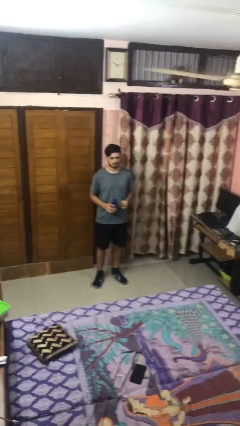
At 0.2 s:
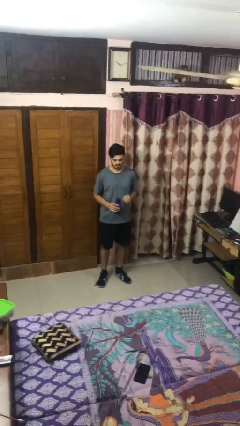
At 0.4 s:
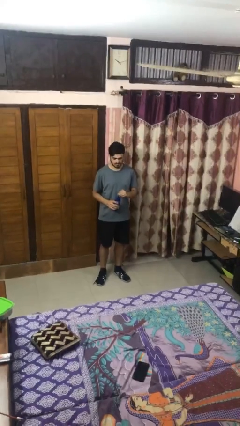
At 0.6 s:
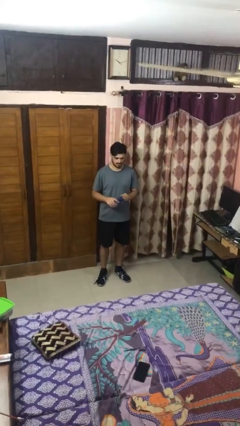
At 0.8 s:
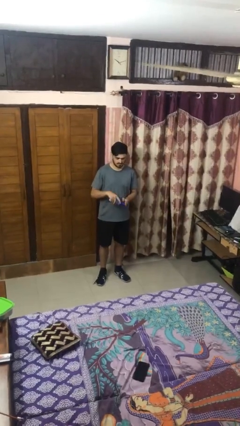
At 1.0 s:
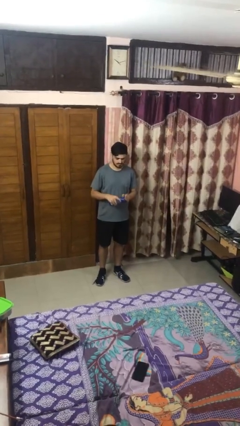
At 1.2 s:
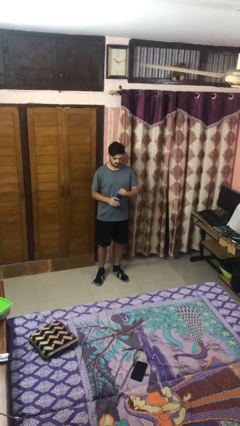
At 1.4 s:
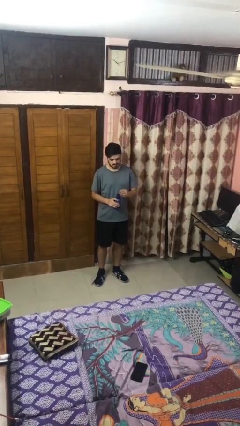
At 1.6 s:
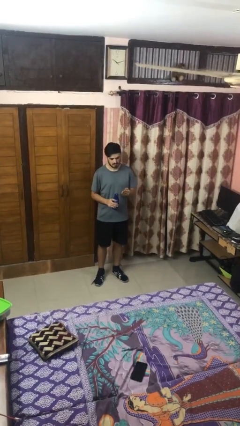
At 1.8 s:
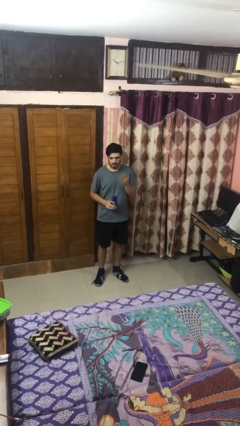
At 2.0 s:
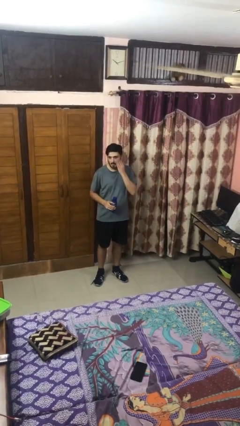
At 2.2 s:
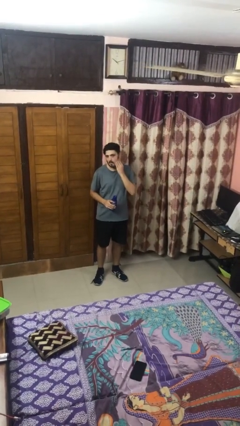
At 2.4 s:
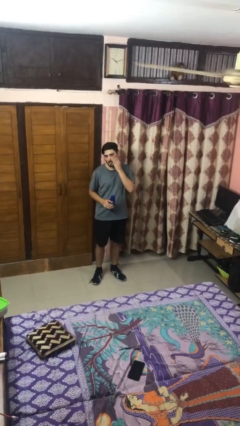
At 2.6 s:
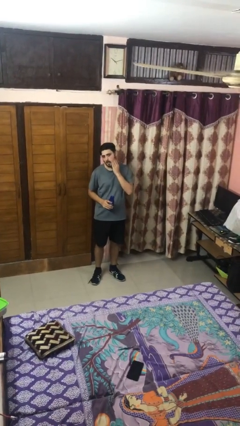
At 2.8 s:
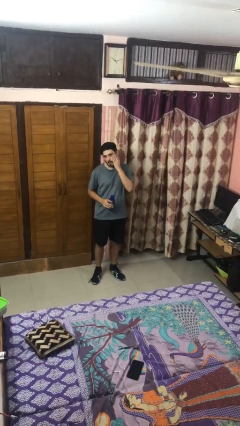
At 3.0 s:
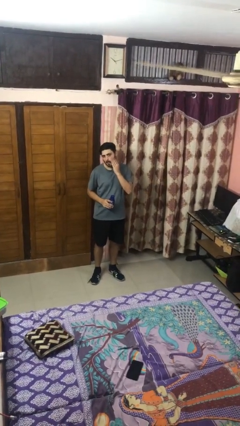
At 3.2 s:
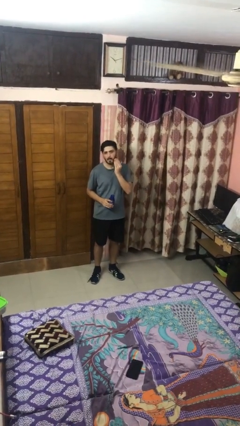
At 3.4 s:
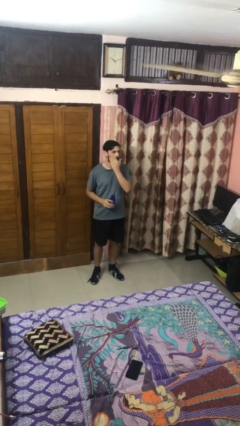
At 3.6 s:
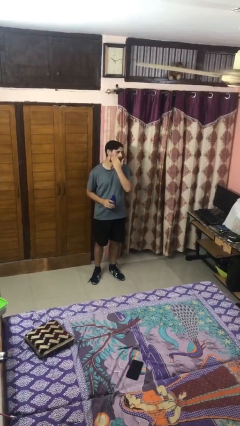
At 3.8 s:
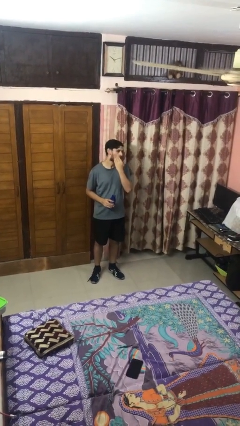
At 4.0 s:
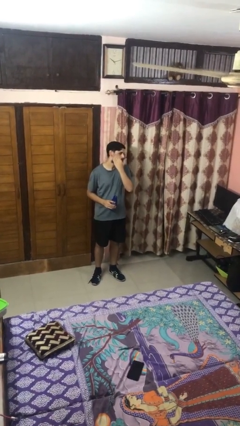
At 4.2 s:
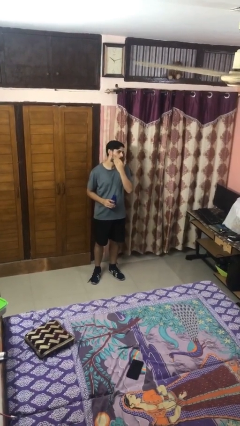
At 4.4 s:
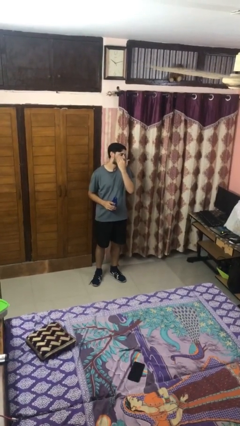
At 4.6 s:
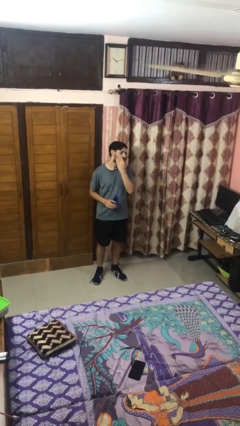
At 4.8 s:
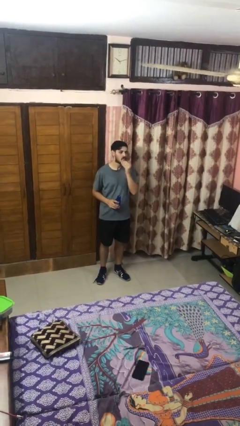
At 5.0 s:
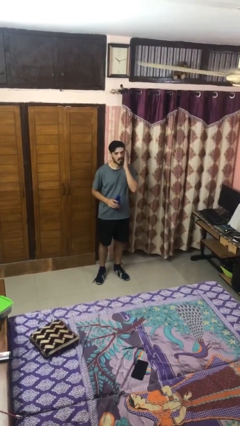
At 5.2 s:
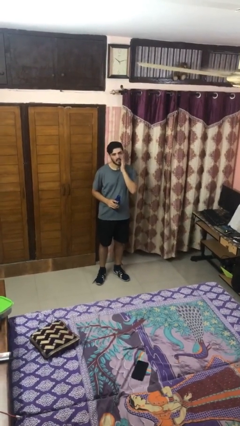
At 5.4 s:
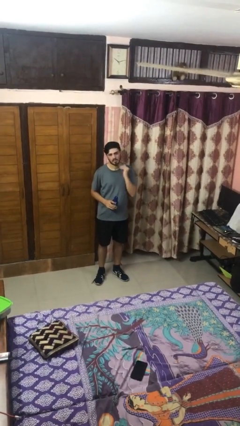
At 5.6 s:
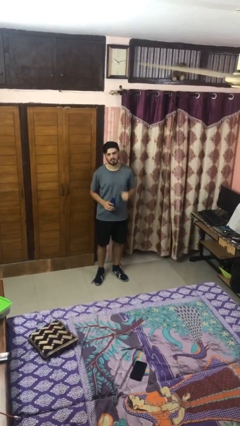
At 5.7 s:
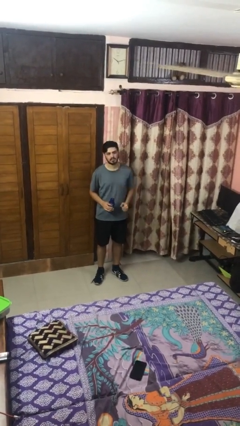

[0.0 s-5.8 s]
person applies facial moisturizer

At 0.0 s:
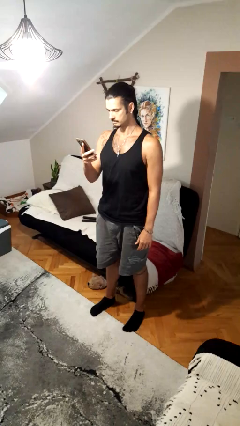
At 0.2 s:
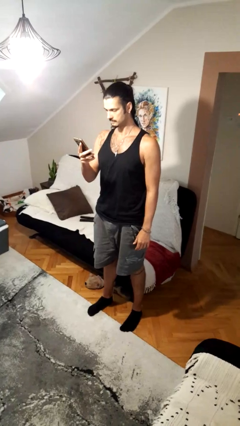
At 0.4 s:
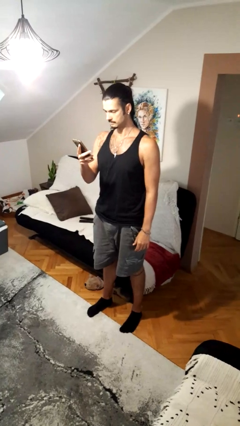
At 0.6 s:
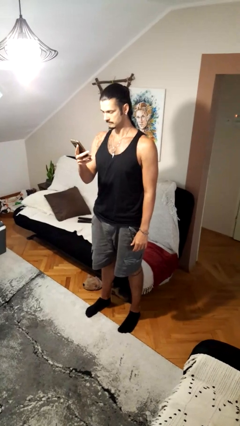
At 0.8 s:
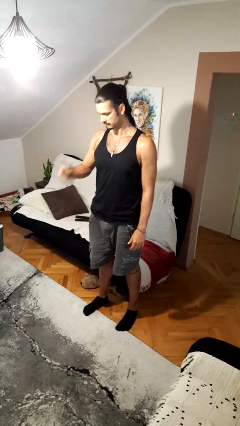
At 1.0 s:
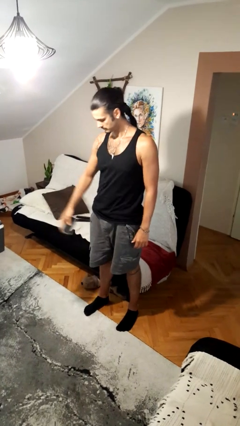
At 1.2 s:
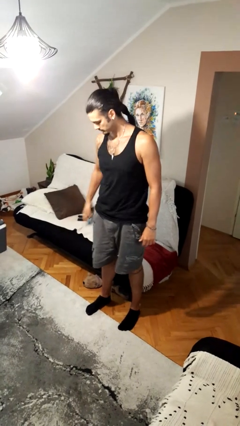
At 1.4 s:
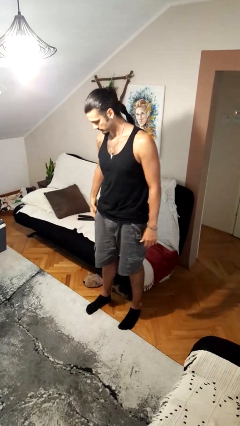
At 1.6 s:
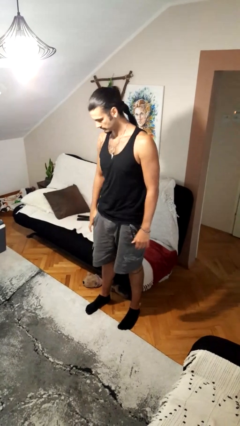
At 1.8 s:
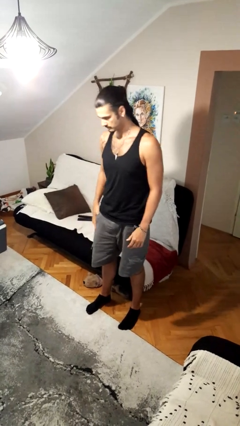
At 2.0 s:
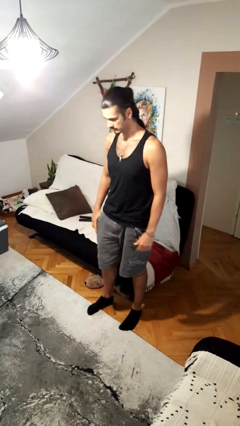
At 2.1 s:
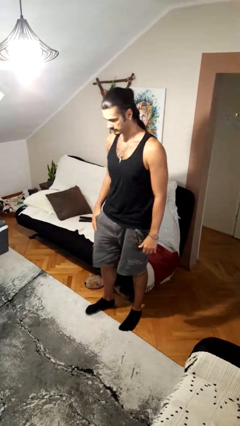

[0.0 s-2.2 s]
person puts phone into pocket

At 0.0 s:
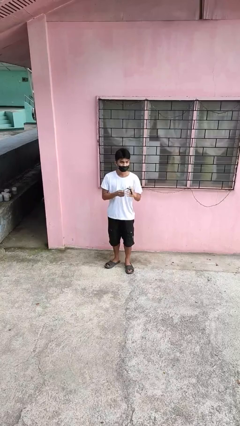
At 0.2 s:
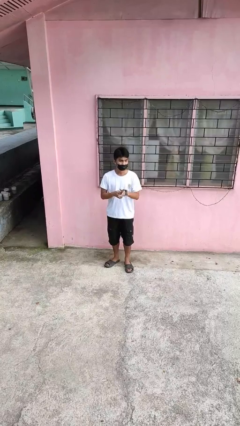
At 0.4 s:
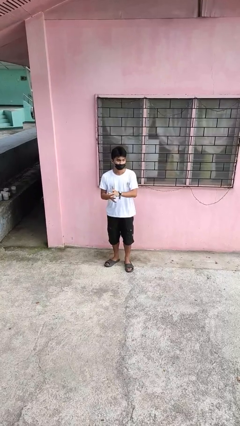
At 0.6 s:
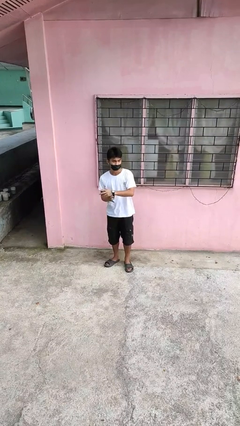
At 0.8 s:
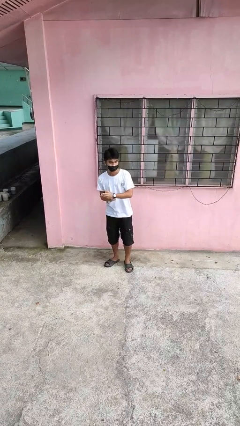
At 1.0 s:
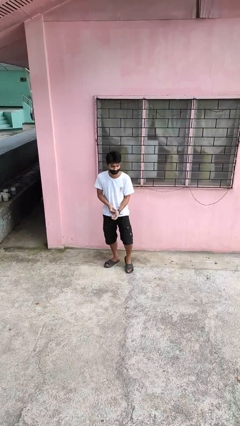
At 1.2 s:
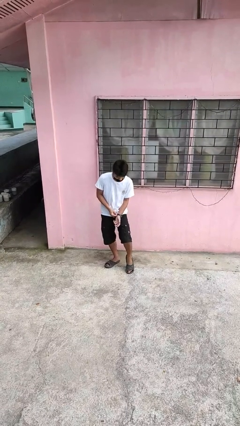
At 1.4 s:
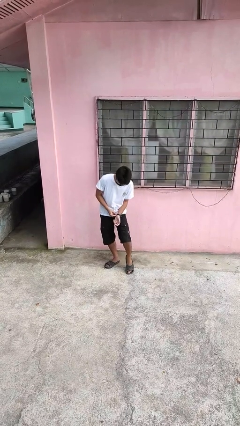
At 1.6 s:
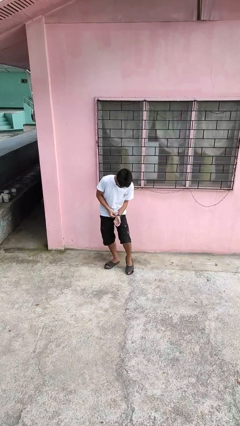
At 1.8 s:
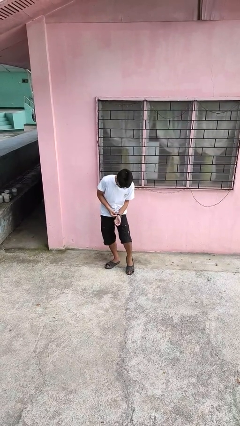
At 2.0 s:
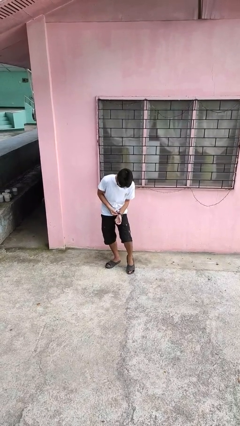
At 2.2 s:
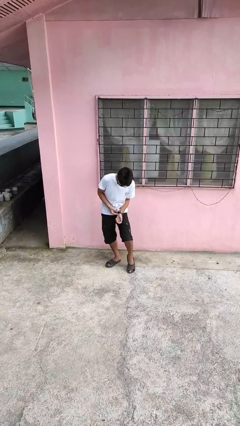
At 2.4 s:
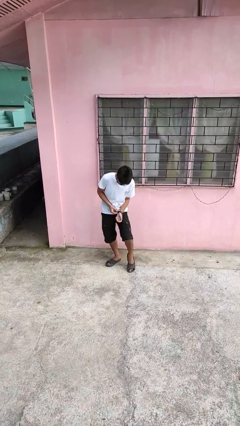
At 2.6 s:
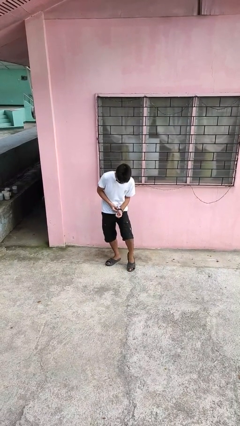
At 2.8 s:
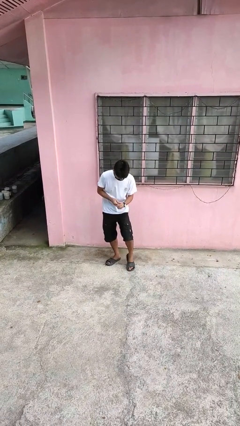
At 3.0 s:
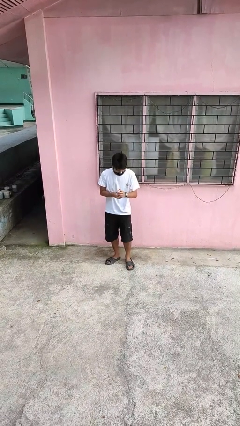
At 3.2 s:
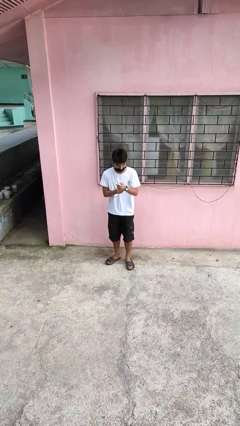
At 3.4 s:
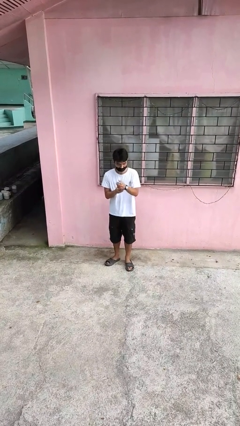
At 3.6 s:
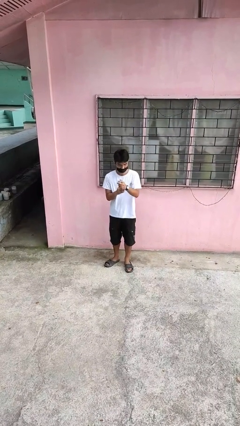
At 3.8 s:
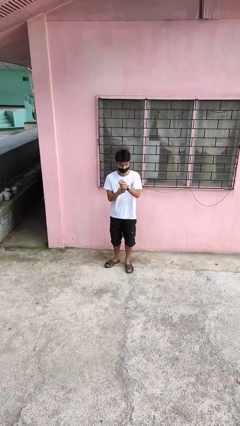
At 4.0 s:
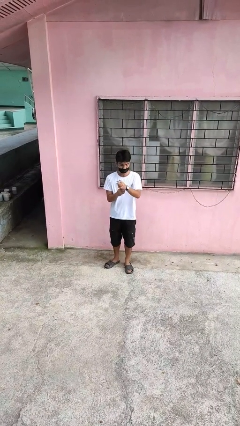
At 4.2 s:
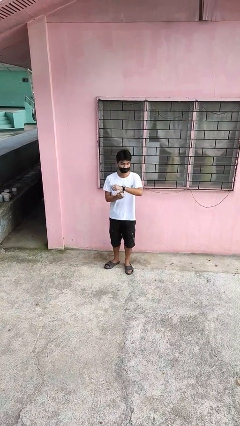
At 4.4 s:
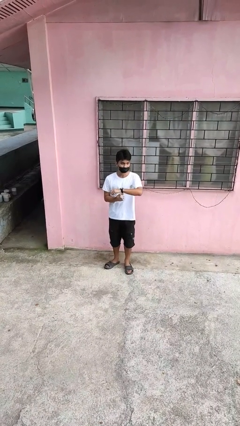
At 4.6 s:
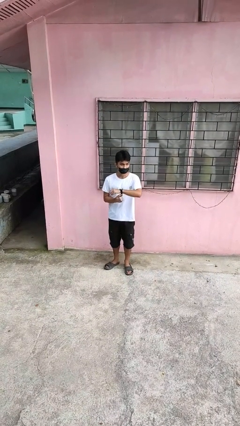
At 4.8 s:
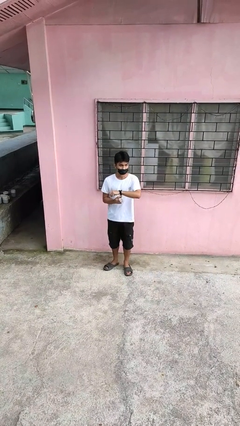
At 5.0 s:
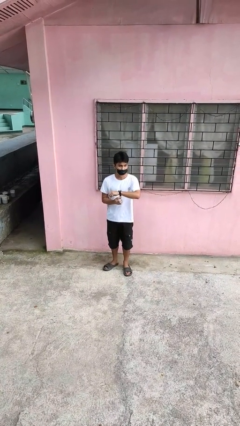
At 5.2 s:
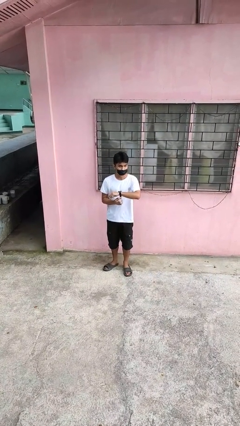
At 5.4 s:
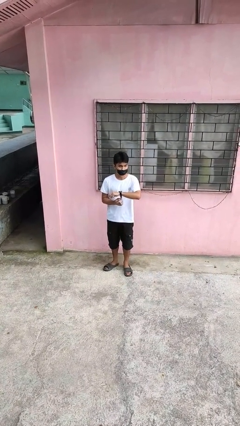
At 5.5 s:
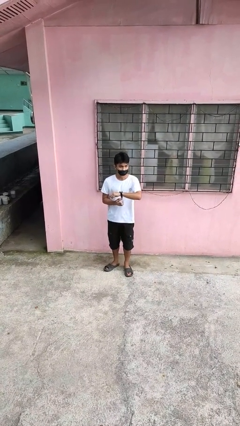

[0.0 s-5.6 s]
person puts on wristwatch

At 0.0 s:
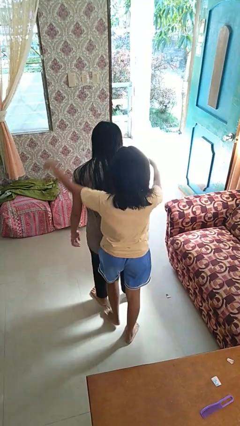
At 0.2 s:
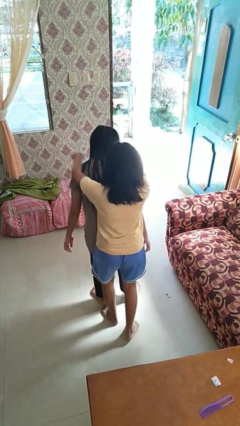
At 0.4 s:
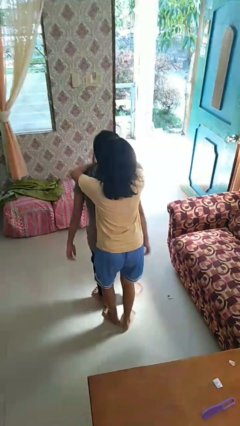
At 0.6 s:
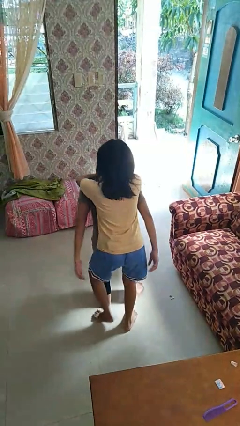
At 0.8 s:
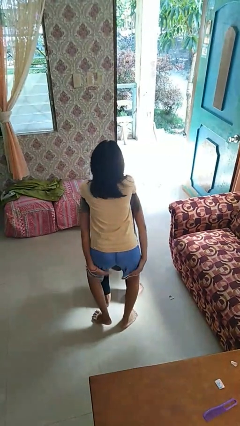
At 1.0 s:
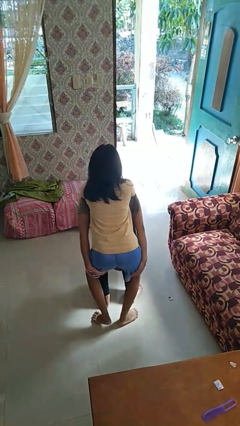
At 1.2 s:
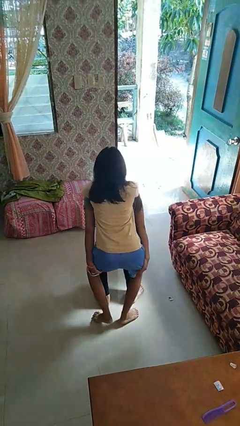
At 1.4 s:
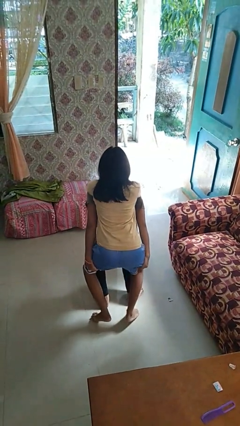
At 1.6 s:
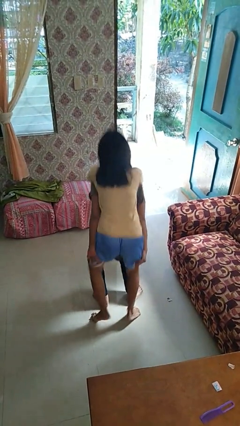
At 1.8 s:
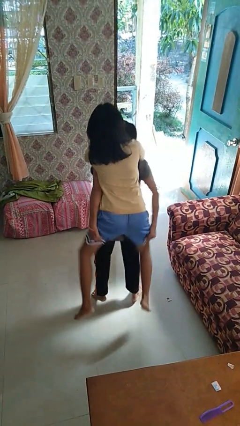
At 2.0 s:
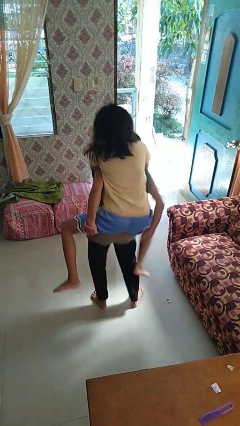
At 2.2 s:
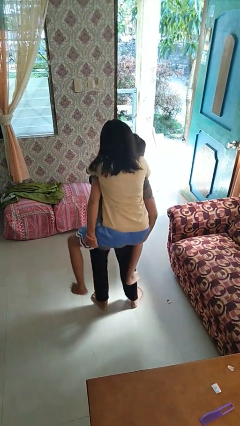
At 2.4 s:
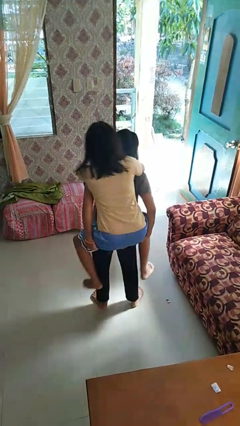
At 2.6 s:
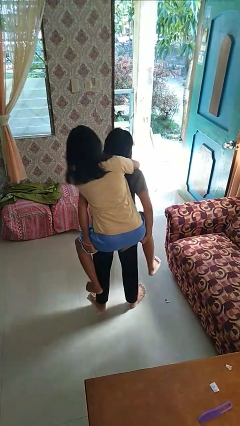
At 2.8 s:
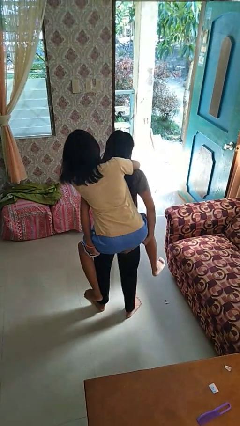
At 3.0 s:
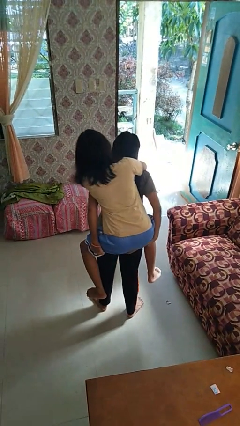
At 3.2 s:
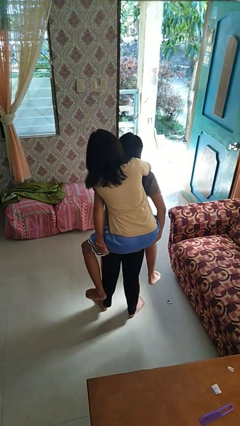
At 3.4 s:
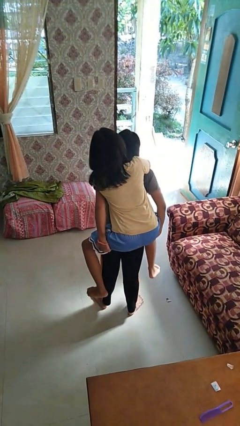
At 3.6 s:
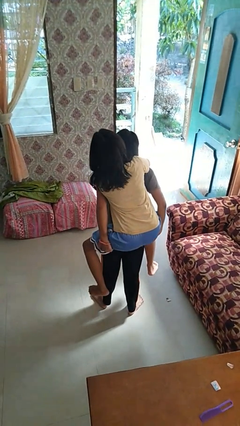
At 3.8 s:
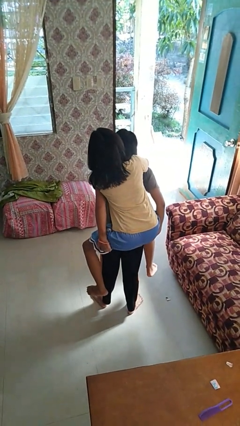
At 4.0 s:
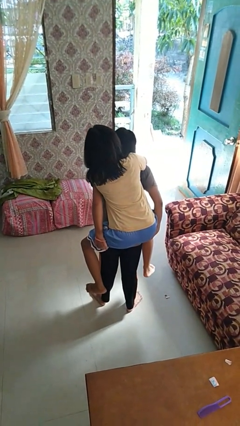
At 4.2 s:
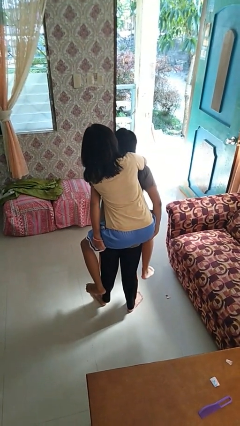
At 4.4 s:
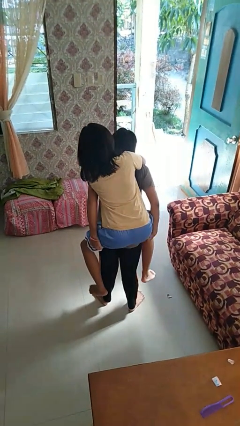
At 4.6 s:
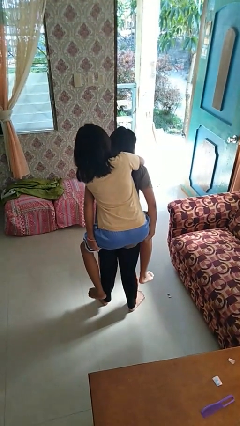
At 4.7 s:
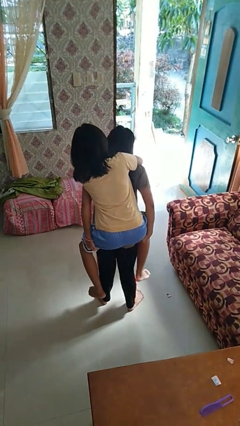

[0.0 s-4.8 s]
person carries person on back
